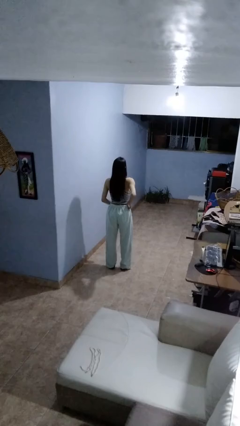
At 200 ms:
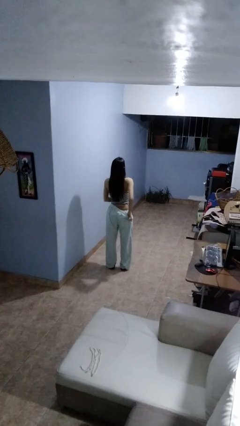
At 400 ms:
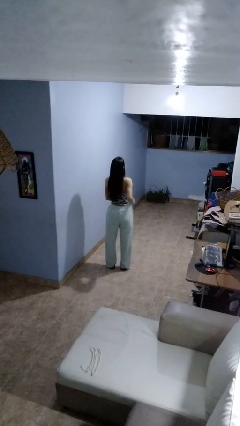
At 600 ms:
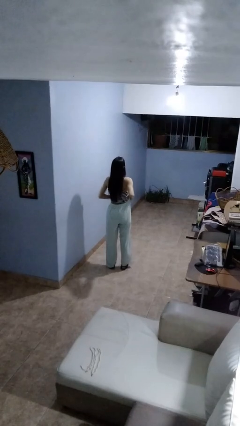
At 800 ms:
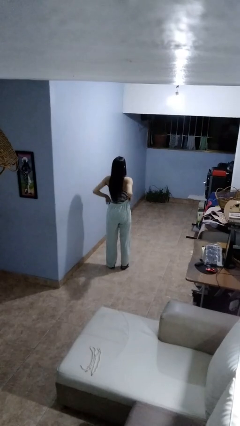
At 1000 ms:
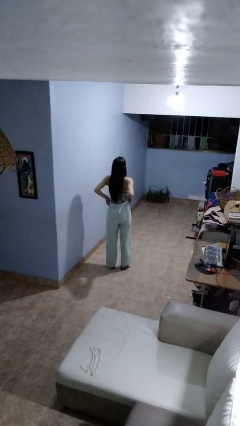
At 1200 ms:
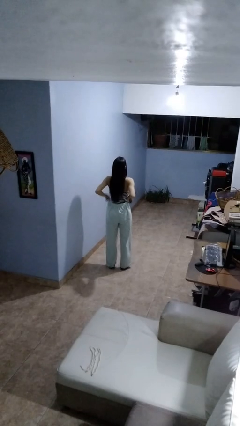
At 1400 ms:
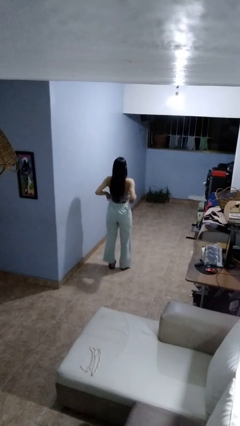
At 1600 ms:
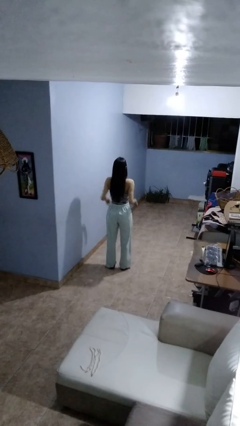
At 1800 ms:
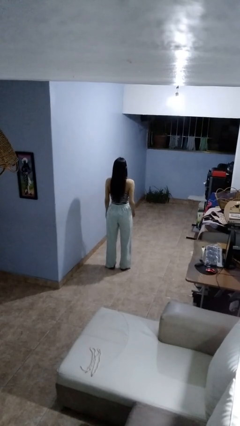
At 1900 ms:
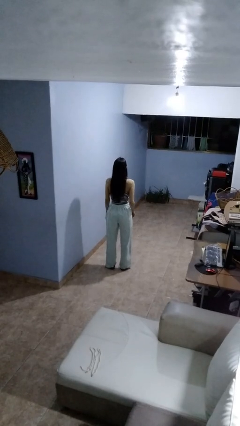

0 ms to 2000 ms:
person hikes up pants

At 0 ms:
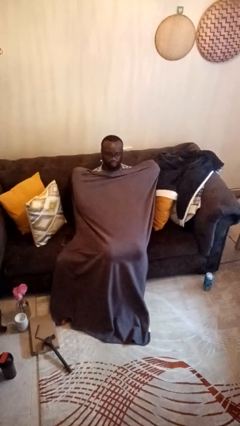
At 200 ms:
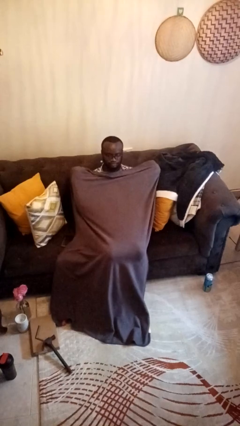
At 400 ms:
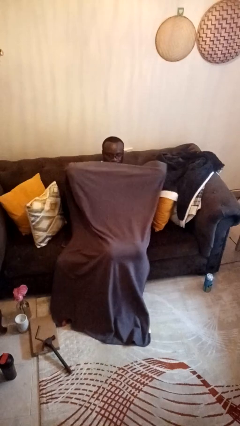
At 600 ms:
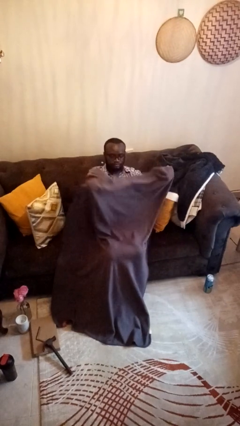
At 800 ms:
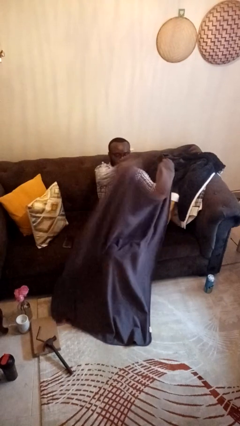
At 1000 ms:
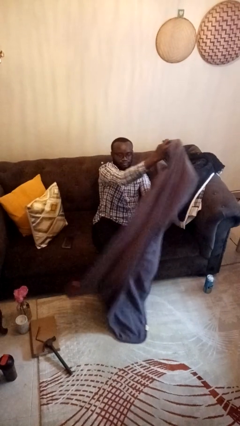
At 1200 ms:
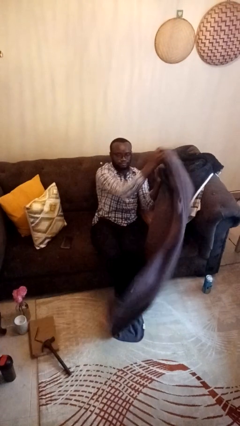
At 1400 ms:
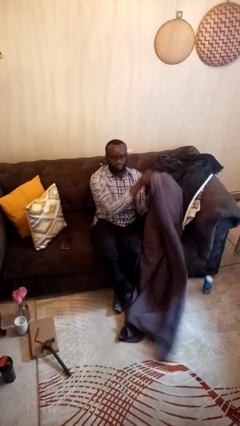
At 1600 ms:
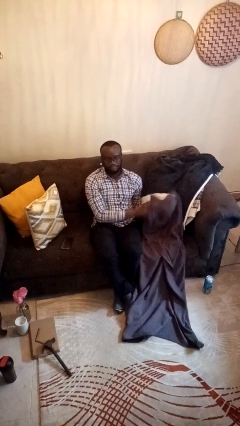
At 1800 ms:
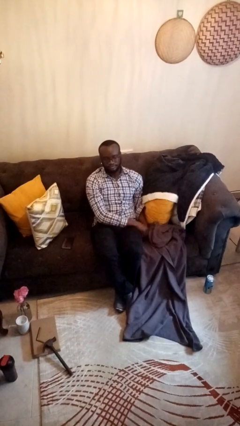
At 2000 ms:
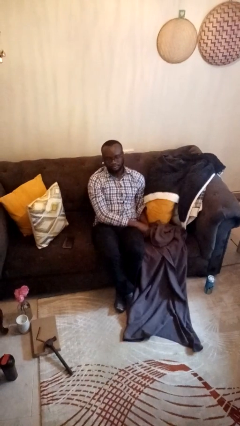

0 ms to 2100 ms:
person uncovers with blanket

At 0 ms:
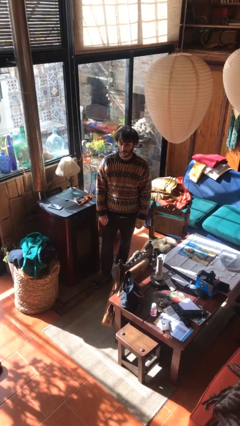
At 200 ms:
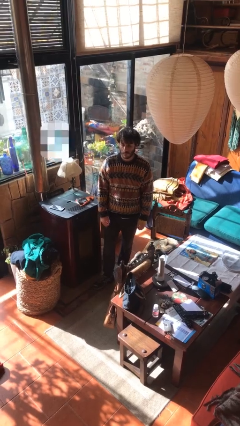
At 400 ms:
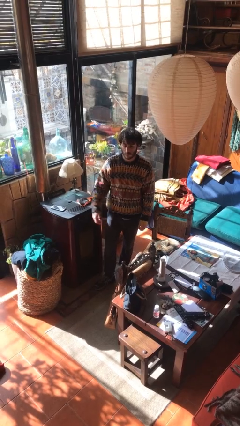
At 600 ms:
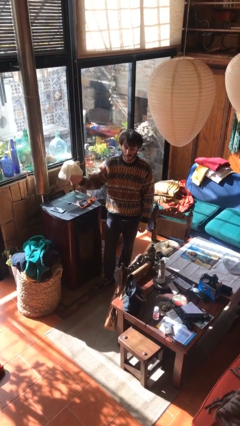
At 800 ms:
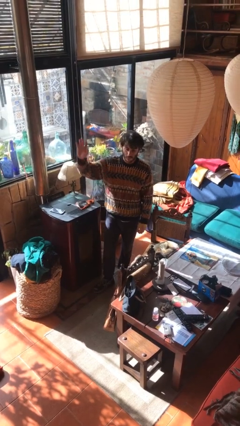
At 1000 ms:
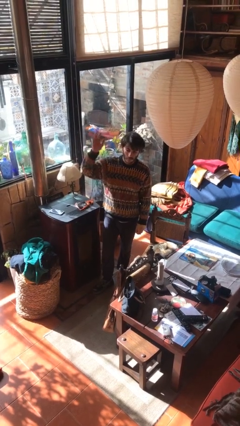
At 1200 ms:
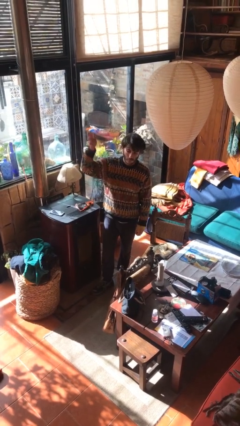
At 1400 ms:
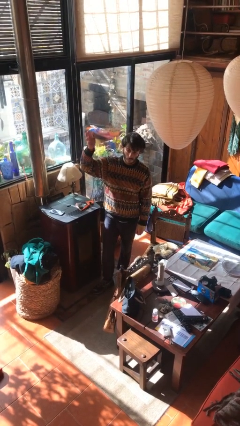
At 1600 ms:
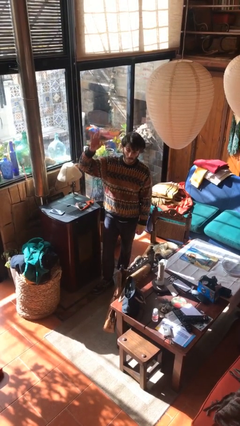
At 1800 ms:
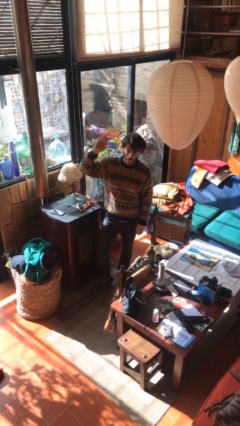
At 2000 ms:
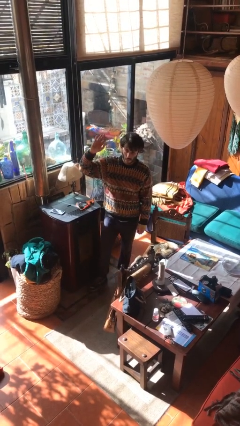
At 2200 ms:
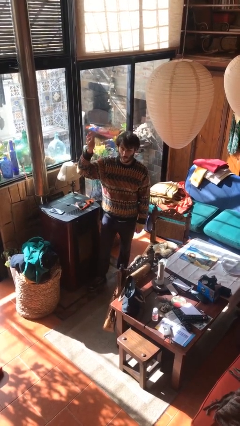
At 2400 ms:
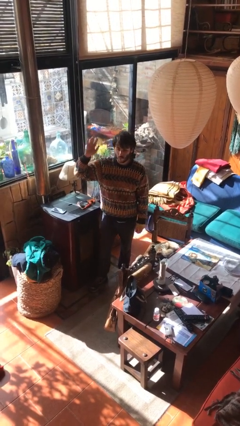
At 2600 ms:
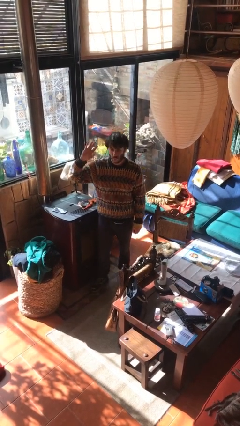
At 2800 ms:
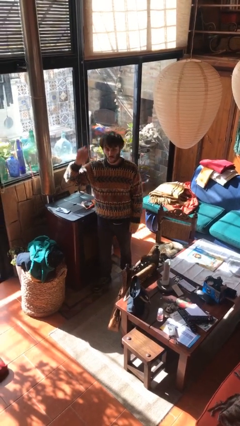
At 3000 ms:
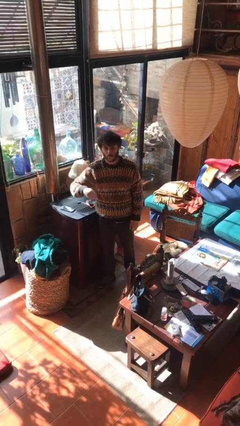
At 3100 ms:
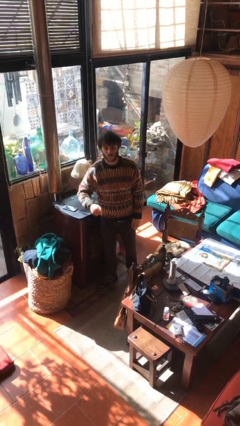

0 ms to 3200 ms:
person waves at person

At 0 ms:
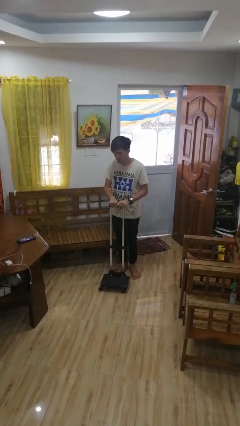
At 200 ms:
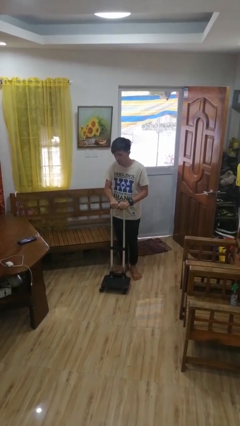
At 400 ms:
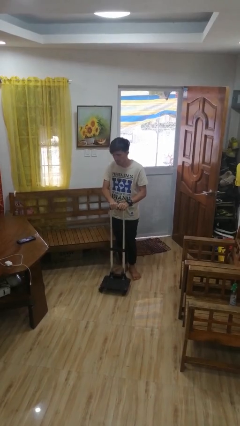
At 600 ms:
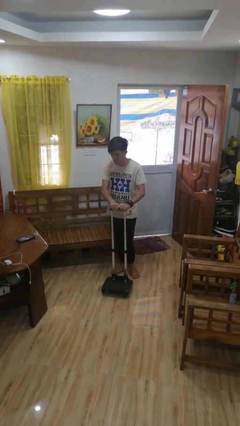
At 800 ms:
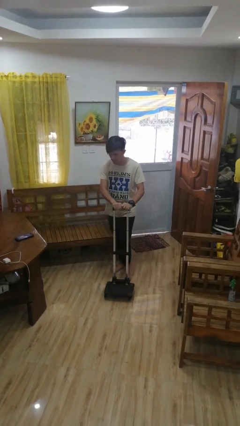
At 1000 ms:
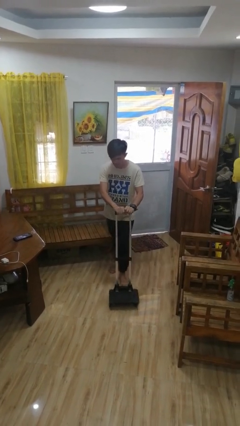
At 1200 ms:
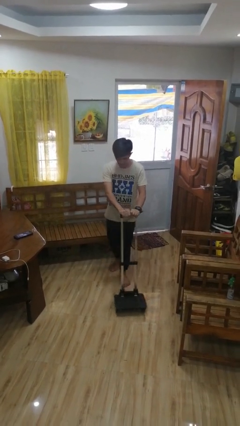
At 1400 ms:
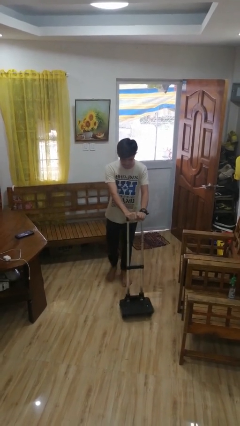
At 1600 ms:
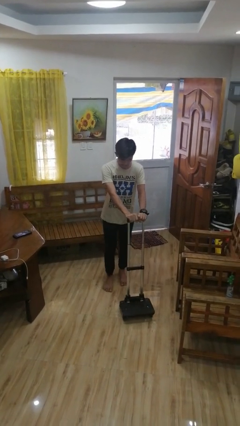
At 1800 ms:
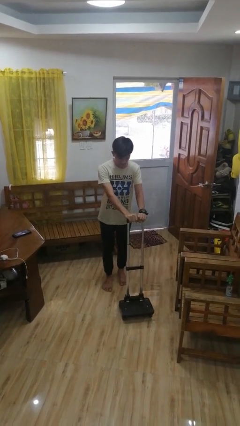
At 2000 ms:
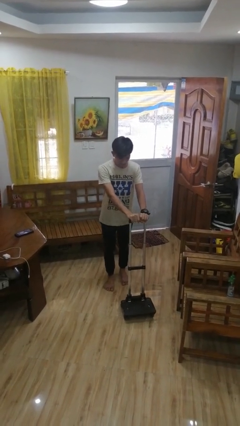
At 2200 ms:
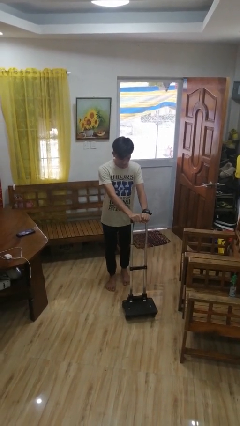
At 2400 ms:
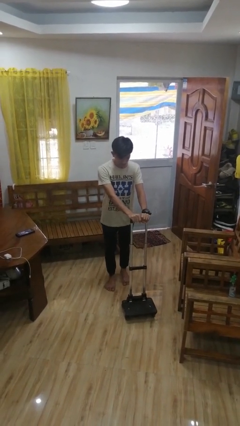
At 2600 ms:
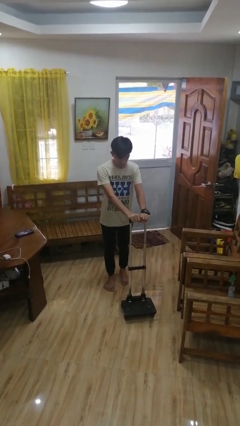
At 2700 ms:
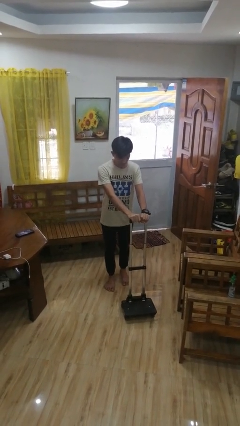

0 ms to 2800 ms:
person pushes wheeled cart

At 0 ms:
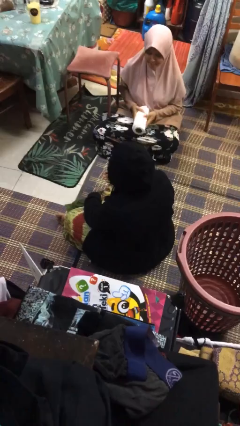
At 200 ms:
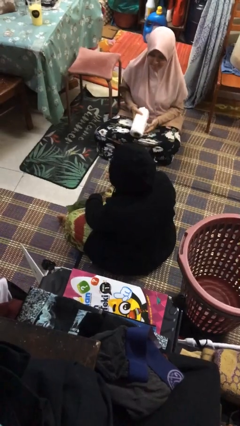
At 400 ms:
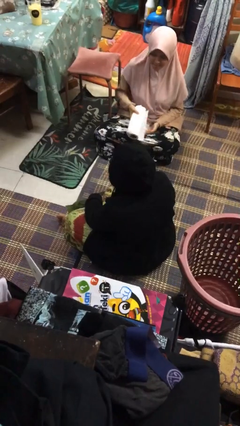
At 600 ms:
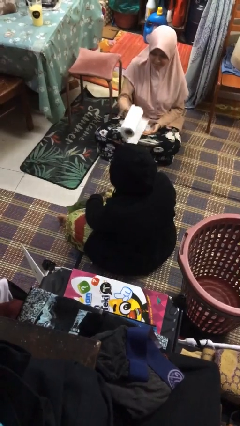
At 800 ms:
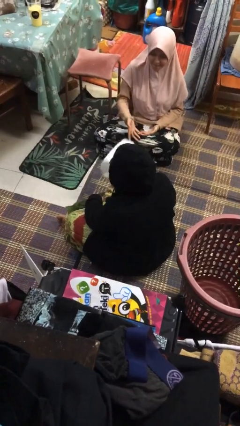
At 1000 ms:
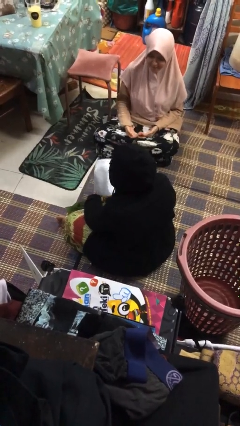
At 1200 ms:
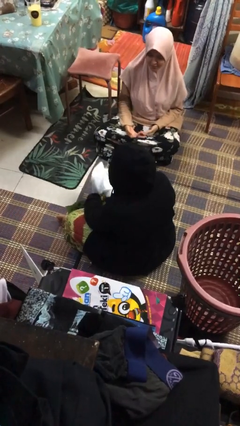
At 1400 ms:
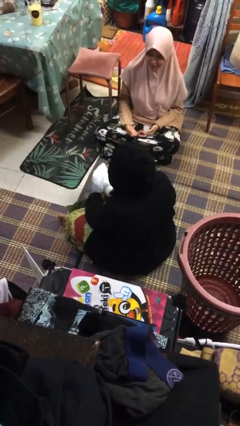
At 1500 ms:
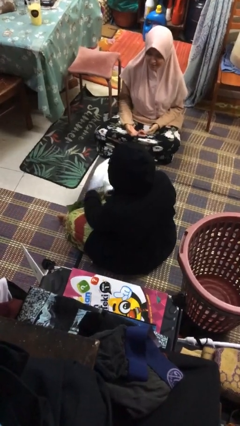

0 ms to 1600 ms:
person catches object from person

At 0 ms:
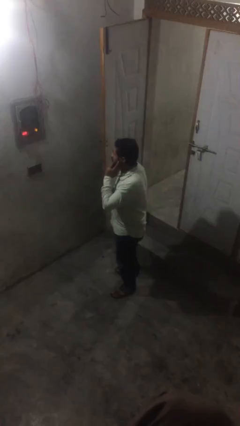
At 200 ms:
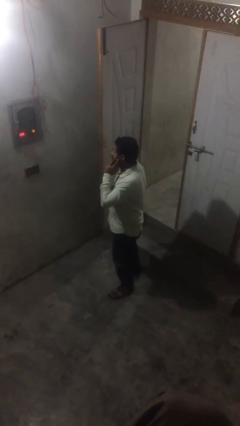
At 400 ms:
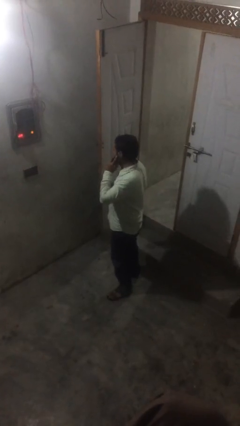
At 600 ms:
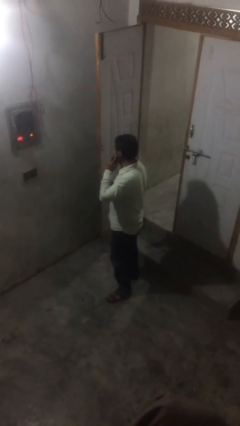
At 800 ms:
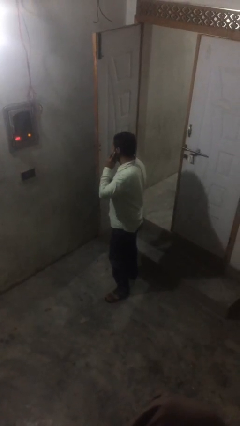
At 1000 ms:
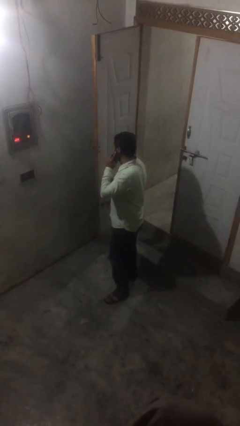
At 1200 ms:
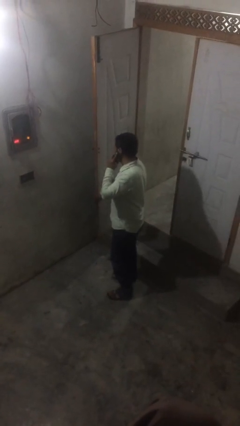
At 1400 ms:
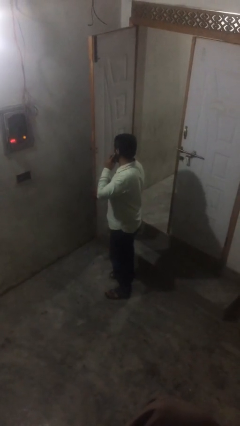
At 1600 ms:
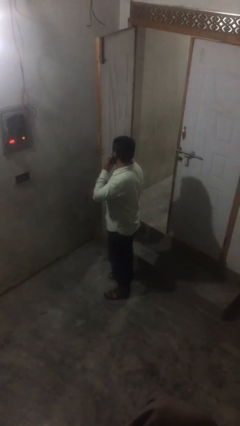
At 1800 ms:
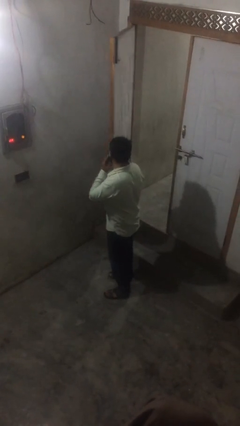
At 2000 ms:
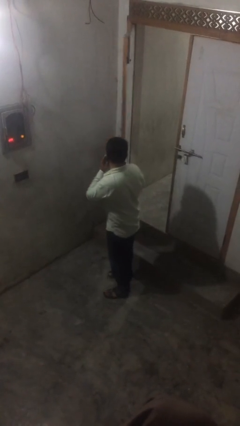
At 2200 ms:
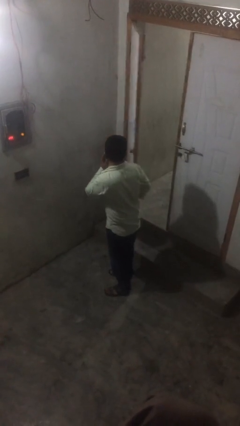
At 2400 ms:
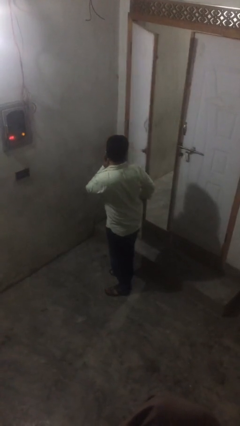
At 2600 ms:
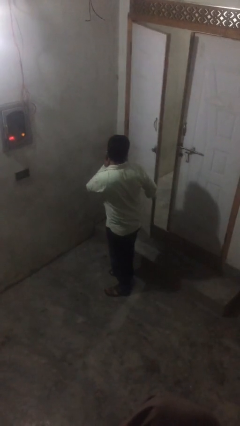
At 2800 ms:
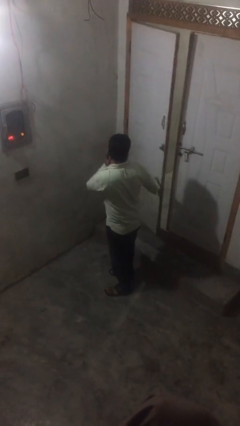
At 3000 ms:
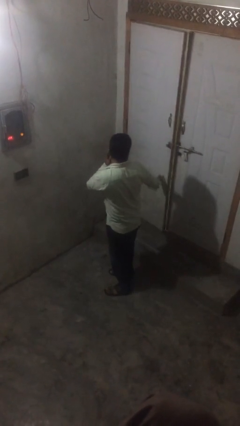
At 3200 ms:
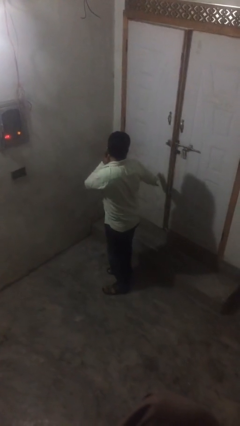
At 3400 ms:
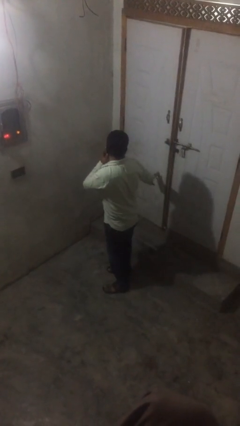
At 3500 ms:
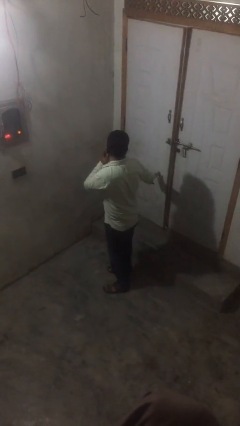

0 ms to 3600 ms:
person closes facility door

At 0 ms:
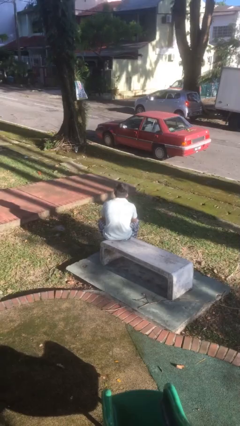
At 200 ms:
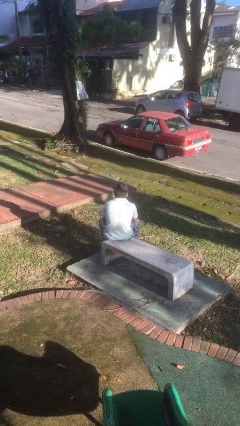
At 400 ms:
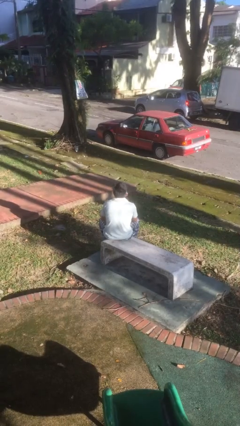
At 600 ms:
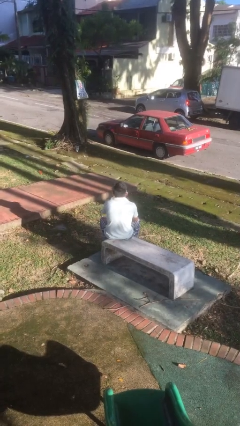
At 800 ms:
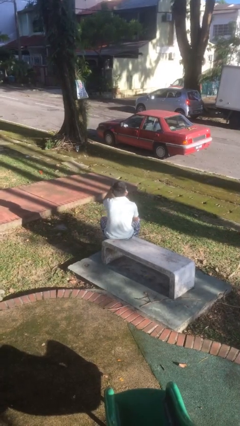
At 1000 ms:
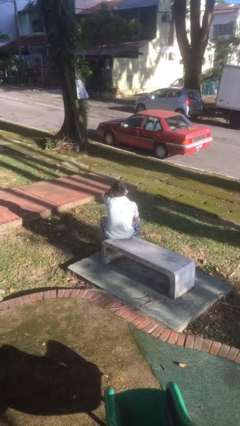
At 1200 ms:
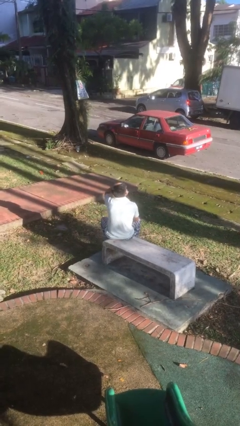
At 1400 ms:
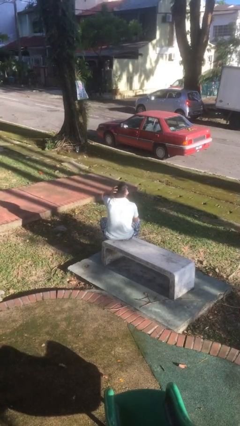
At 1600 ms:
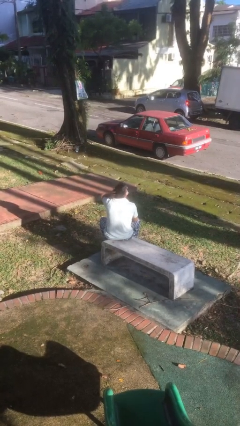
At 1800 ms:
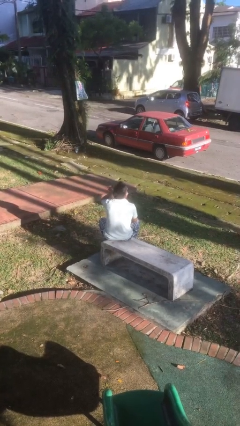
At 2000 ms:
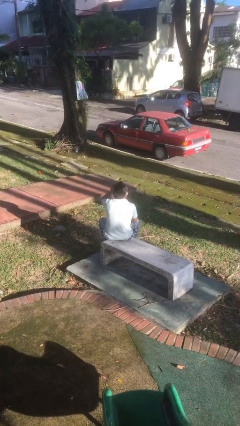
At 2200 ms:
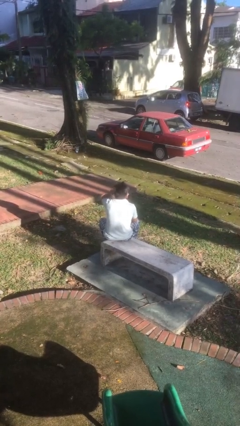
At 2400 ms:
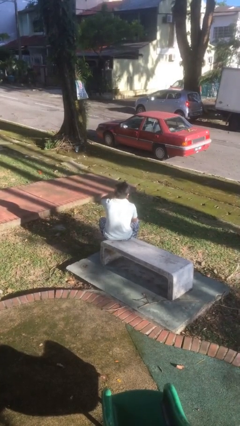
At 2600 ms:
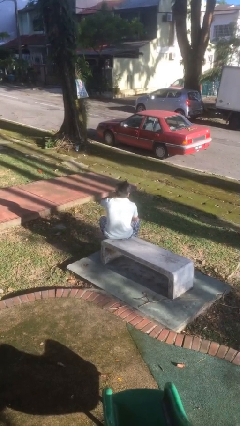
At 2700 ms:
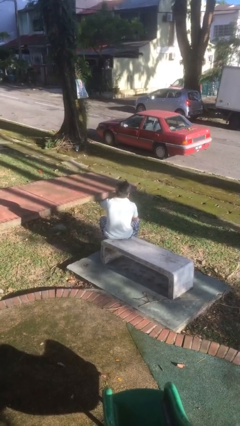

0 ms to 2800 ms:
person strokes hair
